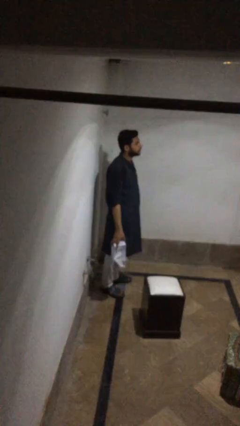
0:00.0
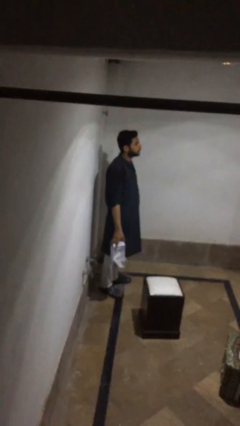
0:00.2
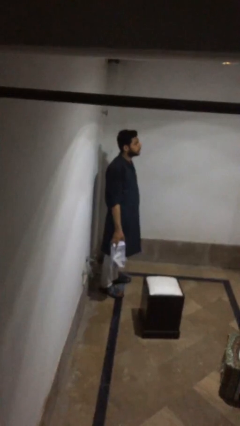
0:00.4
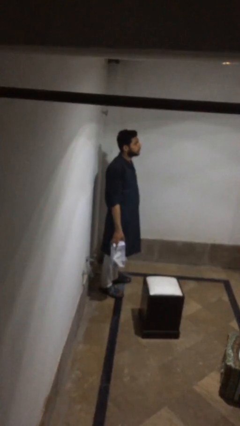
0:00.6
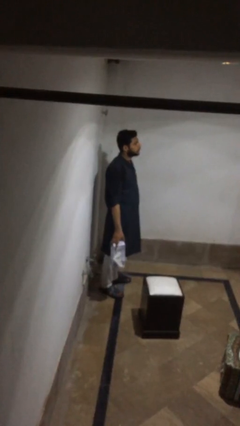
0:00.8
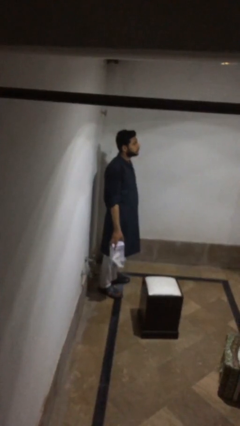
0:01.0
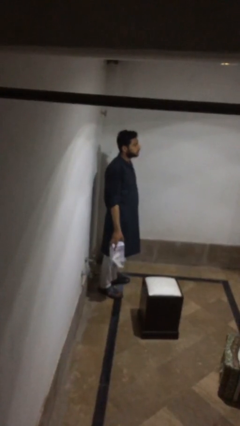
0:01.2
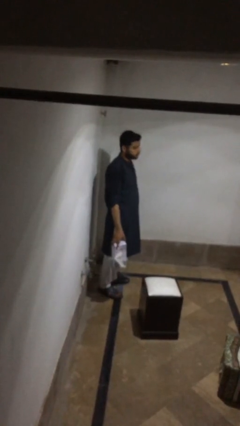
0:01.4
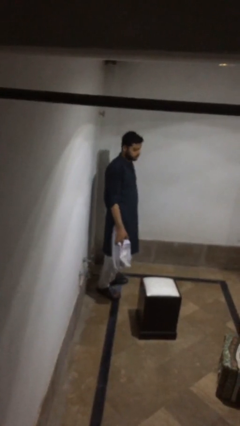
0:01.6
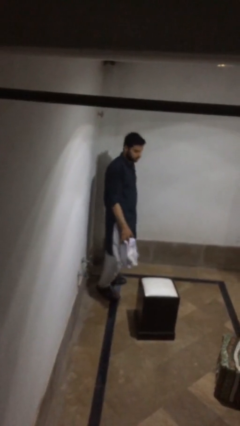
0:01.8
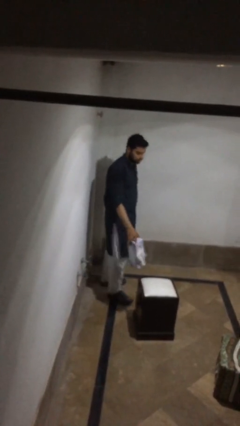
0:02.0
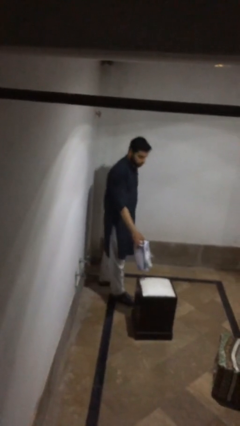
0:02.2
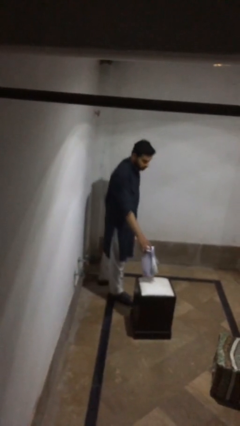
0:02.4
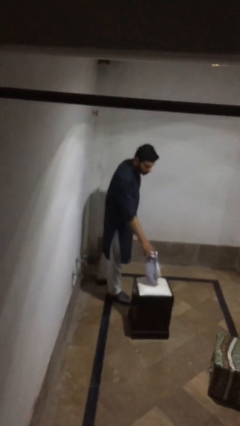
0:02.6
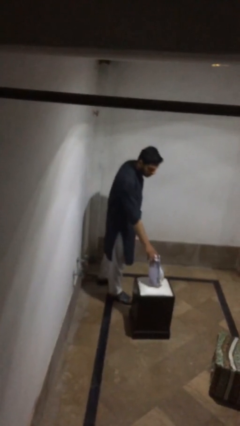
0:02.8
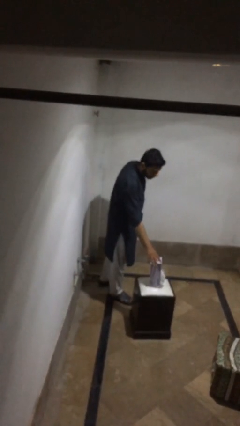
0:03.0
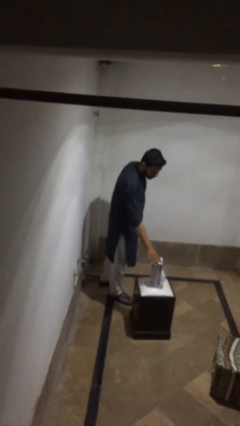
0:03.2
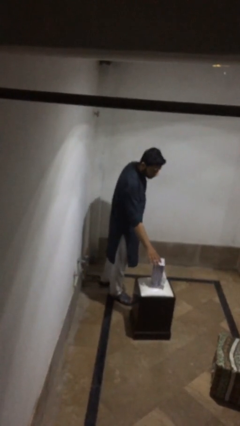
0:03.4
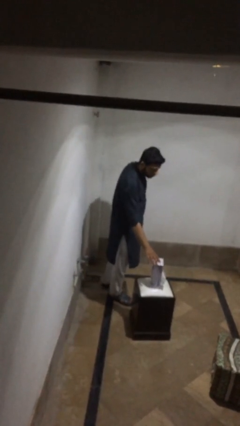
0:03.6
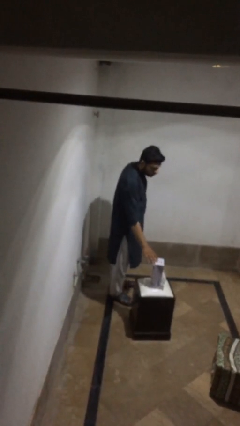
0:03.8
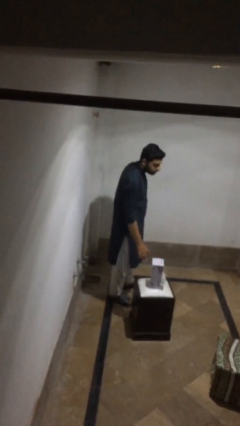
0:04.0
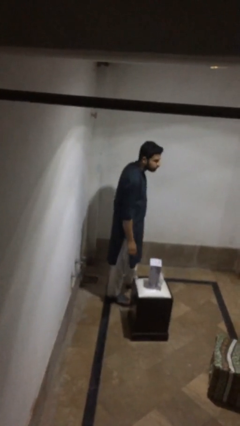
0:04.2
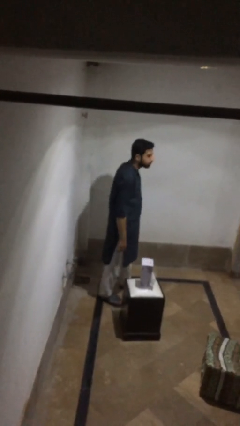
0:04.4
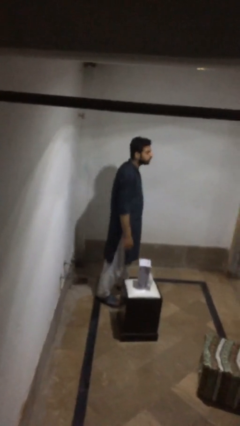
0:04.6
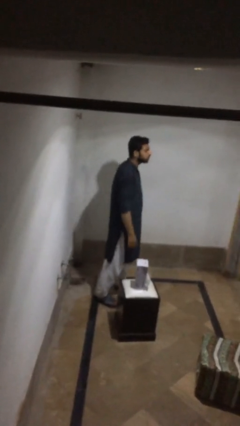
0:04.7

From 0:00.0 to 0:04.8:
person puts down object on table

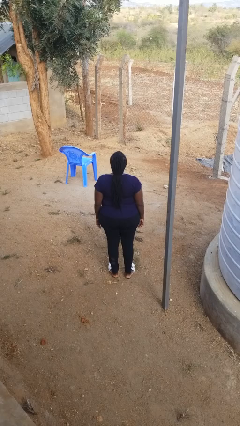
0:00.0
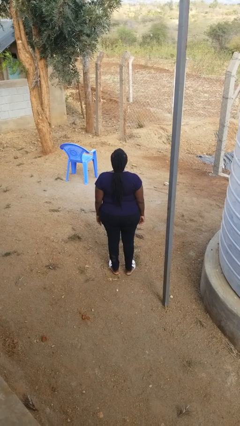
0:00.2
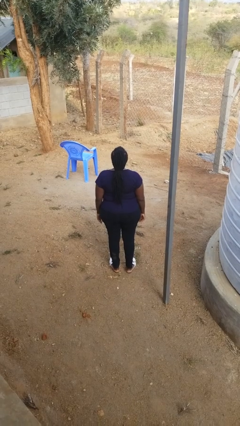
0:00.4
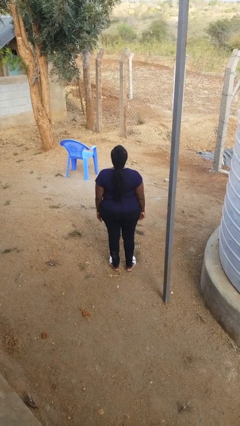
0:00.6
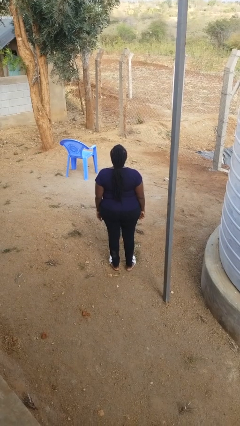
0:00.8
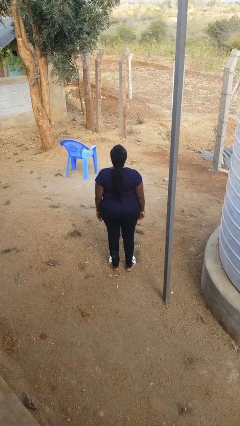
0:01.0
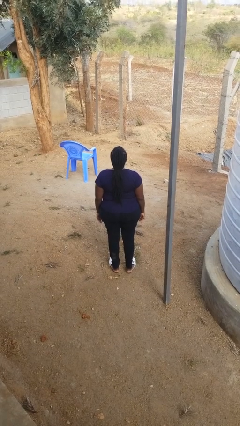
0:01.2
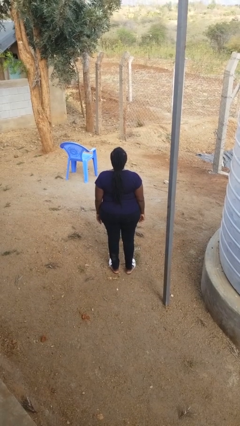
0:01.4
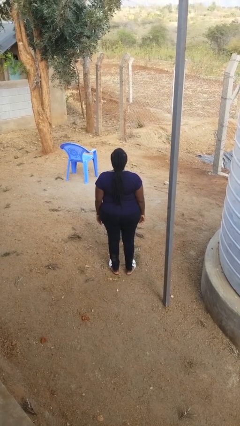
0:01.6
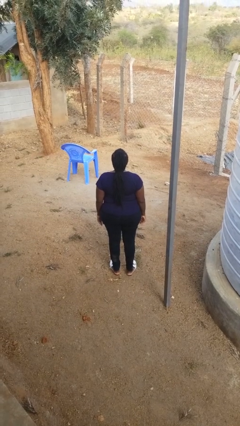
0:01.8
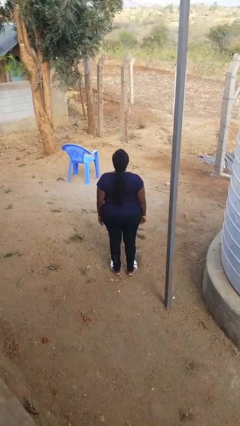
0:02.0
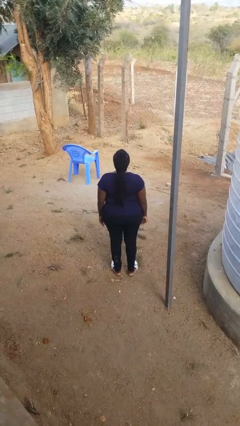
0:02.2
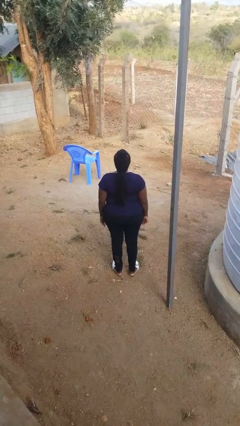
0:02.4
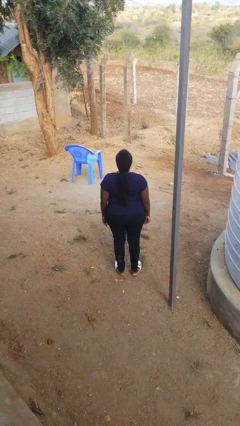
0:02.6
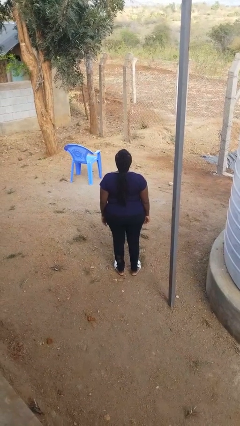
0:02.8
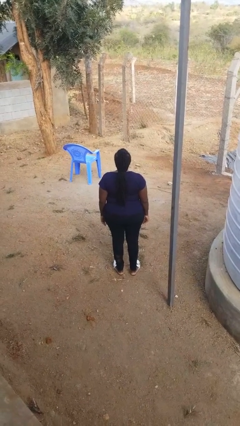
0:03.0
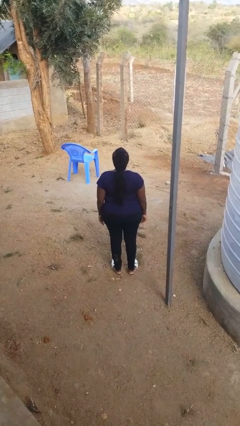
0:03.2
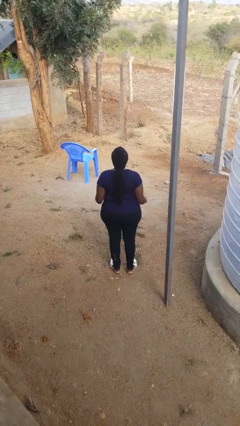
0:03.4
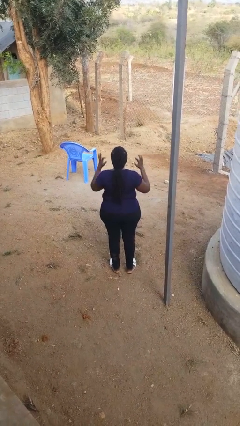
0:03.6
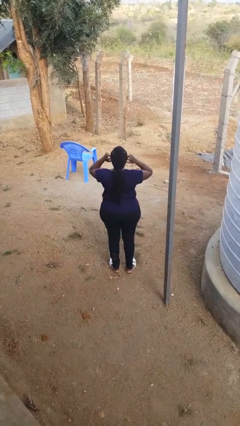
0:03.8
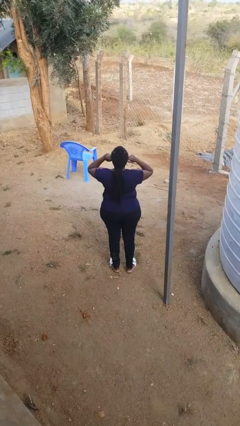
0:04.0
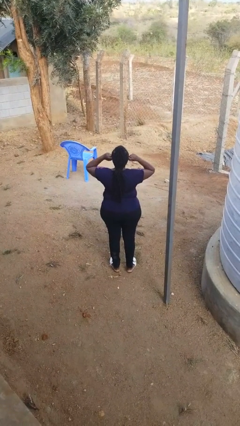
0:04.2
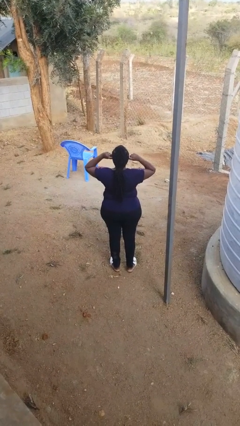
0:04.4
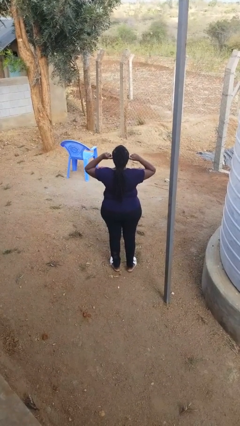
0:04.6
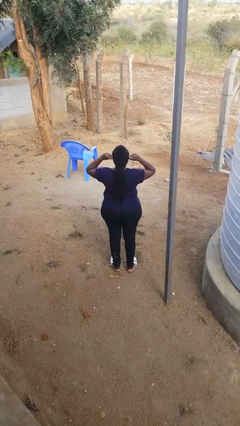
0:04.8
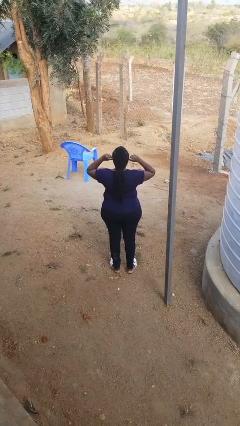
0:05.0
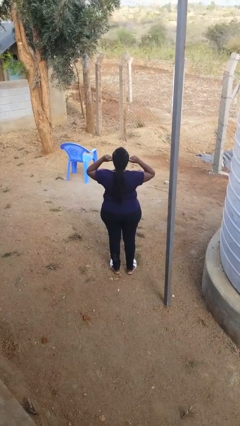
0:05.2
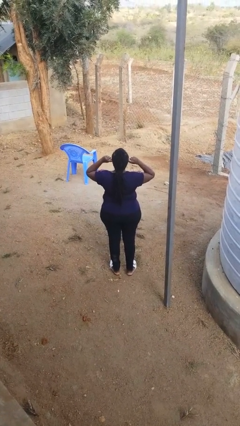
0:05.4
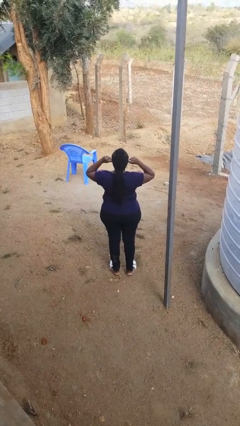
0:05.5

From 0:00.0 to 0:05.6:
person puts fingers in ear

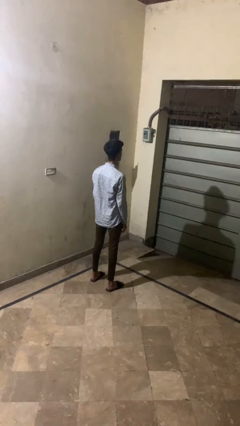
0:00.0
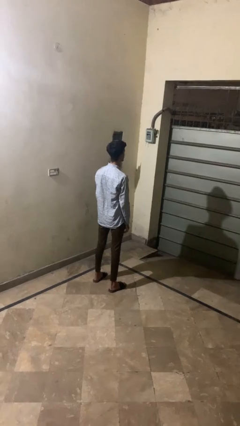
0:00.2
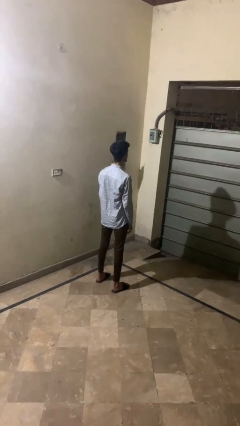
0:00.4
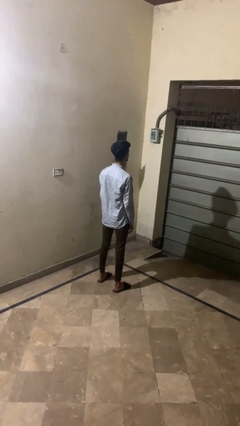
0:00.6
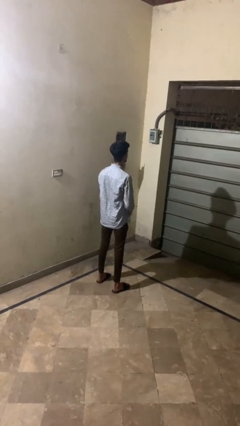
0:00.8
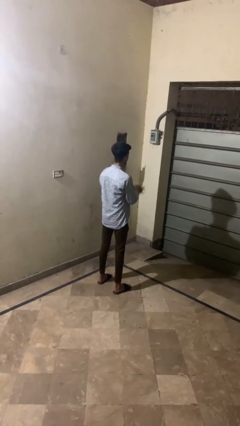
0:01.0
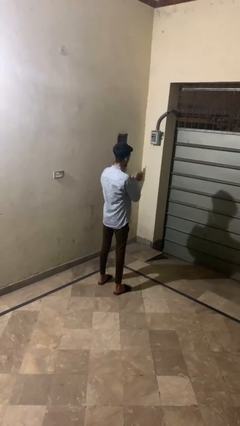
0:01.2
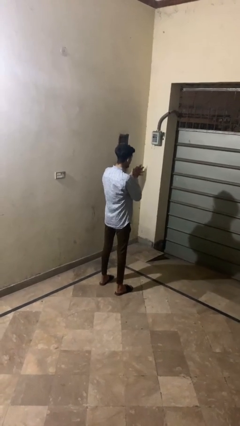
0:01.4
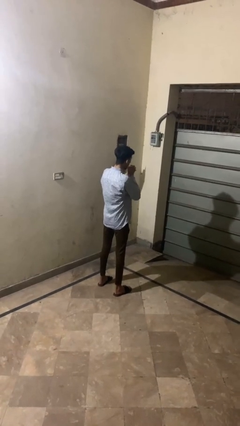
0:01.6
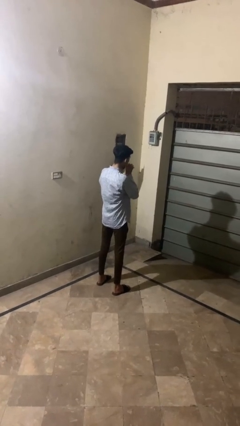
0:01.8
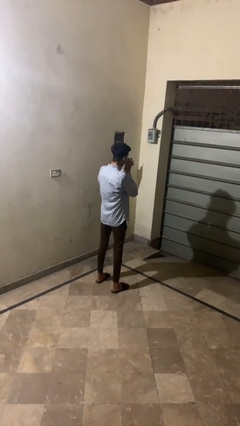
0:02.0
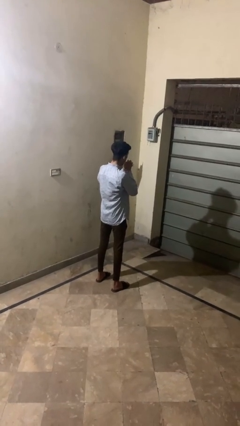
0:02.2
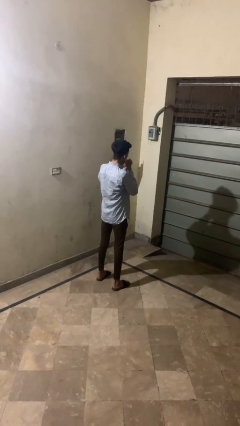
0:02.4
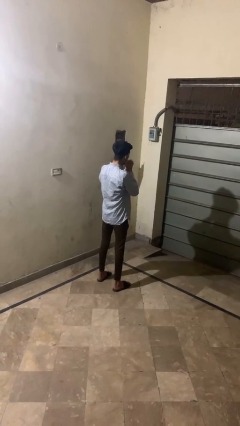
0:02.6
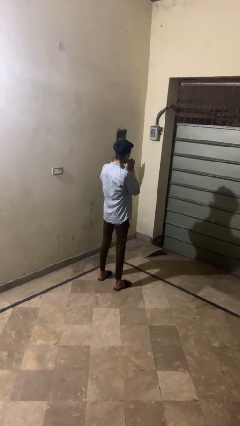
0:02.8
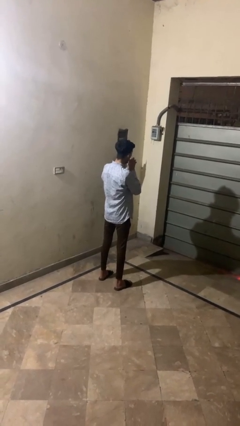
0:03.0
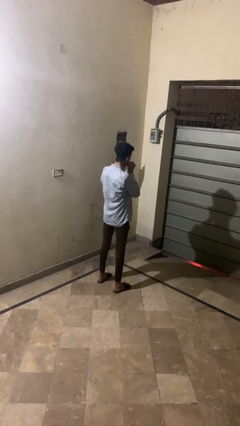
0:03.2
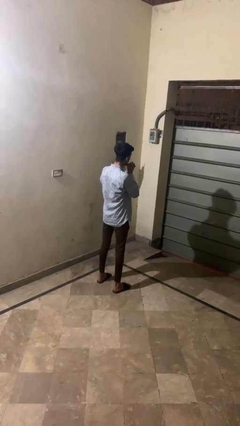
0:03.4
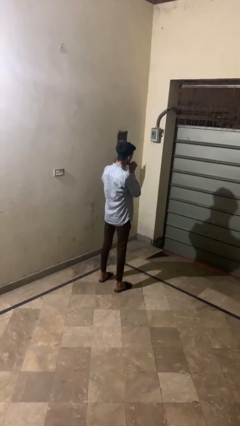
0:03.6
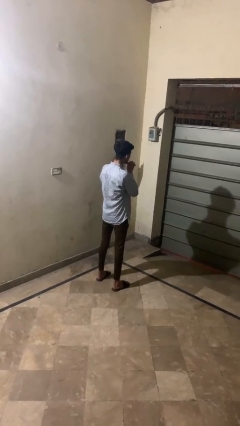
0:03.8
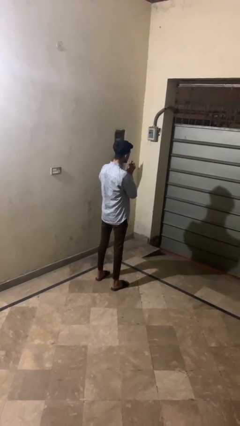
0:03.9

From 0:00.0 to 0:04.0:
person blows into hands

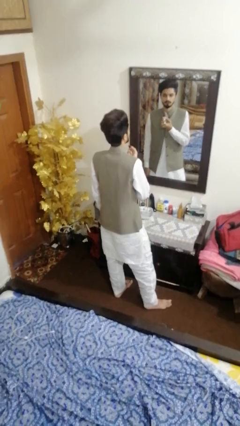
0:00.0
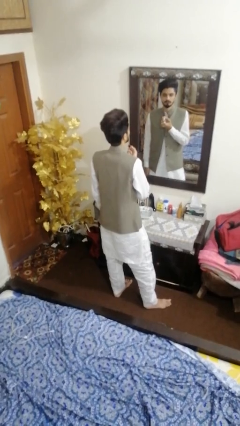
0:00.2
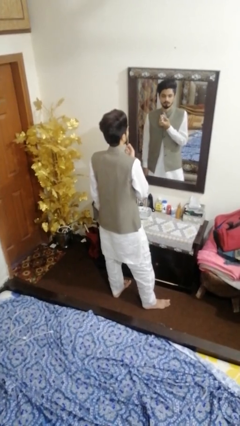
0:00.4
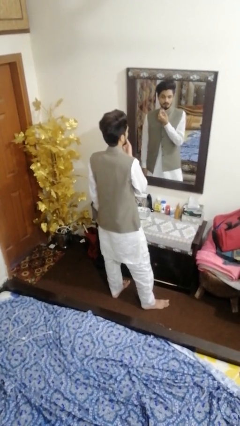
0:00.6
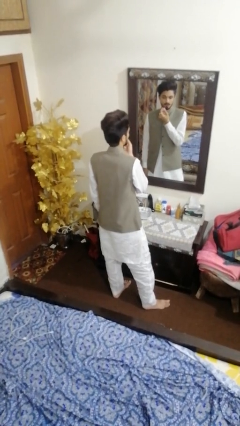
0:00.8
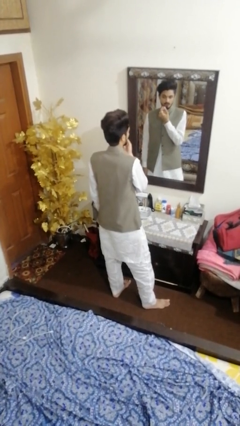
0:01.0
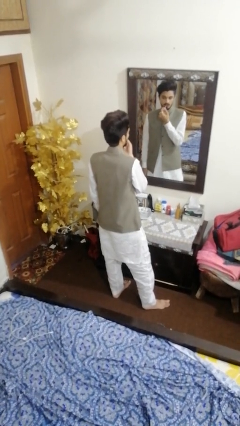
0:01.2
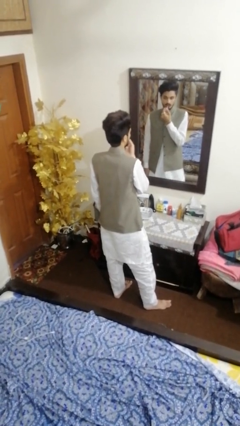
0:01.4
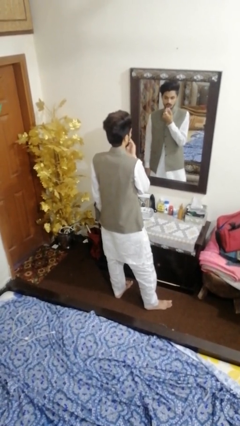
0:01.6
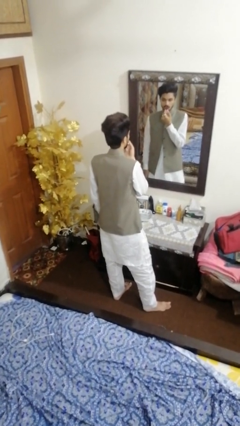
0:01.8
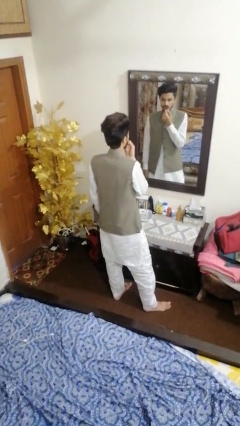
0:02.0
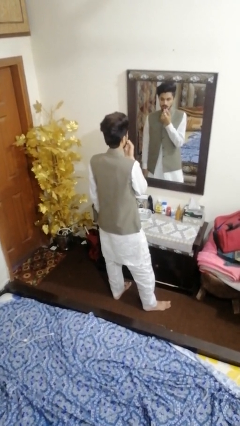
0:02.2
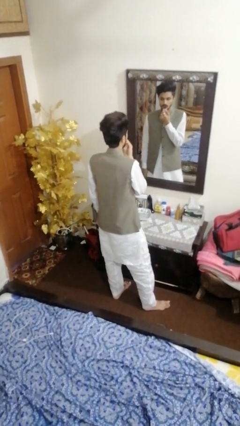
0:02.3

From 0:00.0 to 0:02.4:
person applies lip makeup

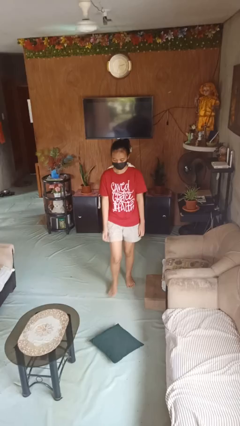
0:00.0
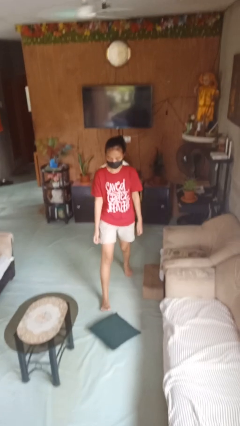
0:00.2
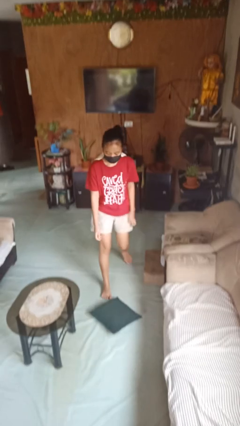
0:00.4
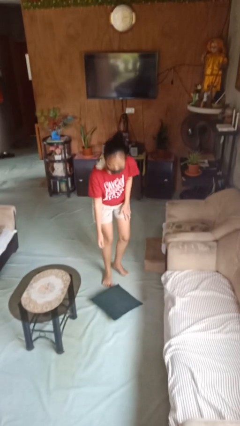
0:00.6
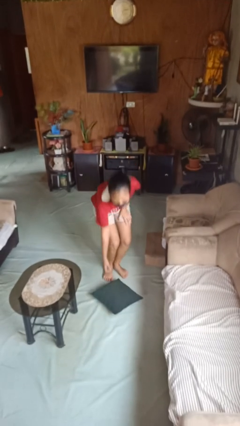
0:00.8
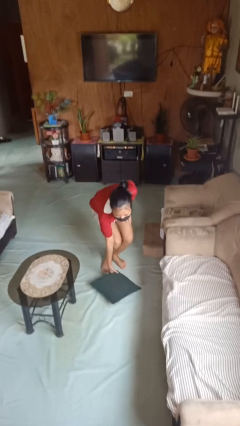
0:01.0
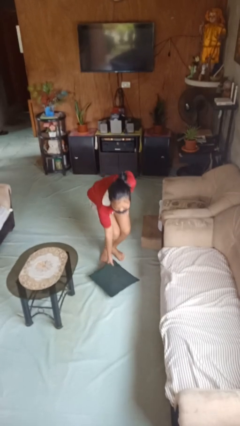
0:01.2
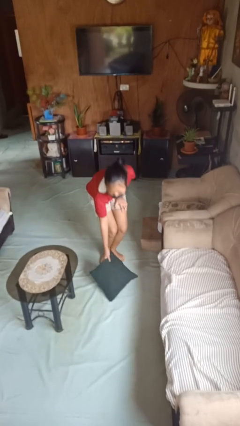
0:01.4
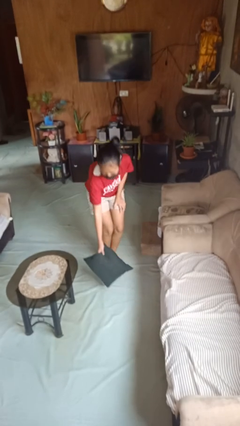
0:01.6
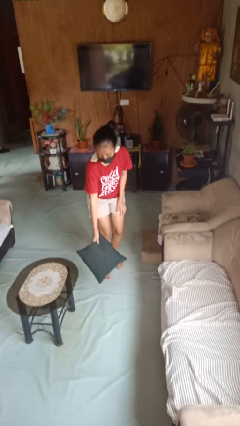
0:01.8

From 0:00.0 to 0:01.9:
person picks up object from floor
